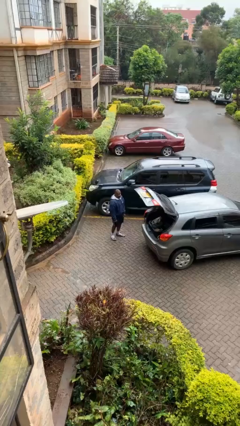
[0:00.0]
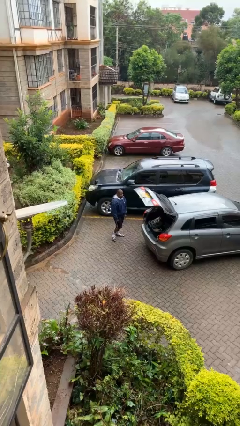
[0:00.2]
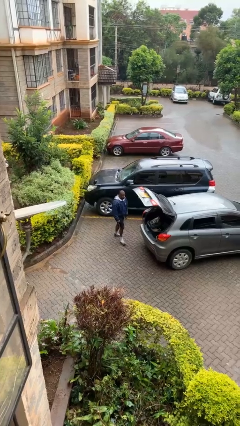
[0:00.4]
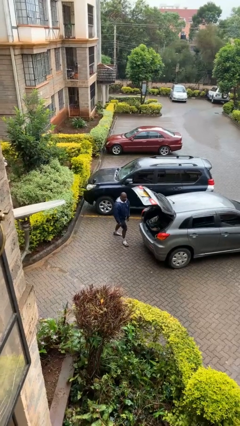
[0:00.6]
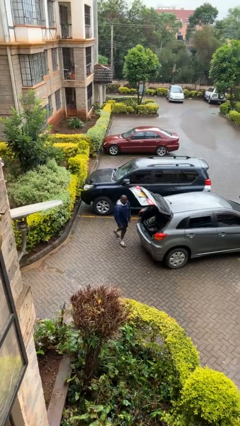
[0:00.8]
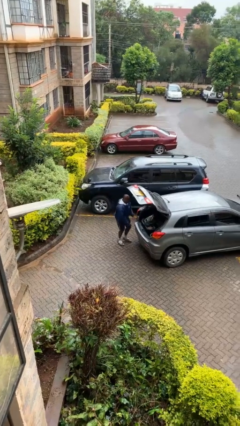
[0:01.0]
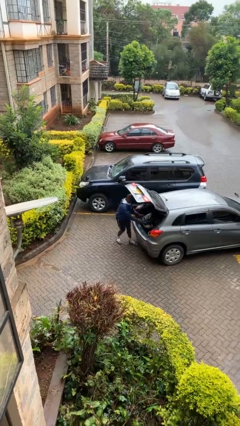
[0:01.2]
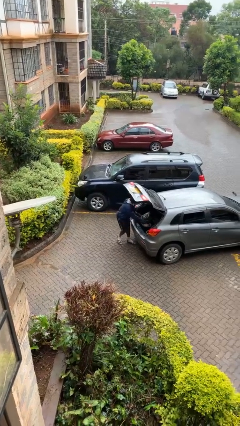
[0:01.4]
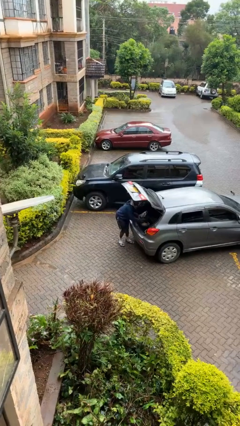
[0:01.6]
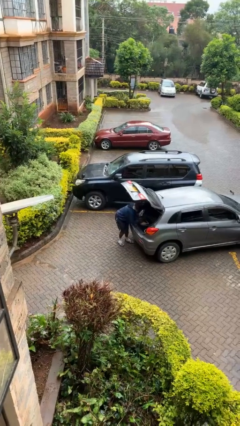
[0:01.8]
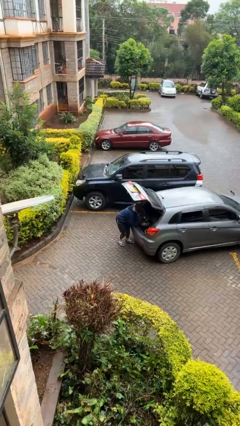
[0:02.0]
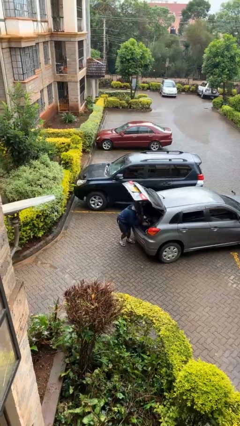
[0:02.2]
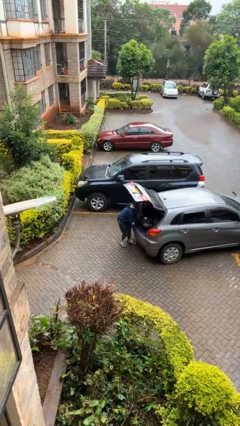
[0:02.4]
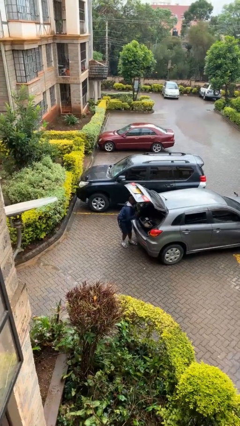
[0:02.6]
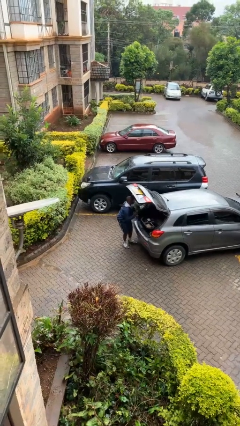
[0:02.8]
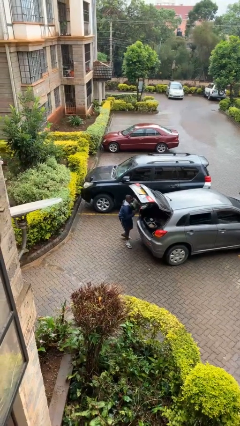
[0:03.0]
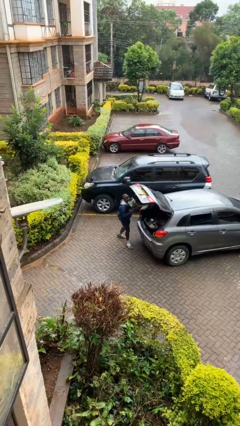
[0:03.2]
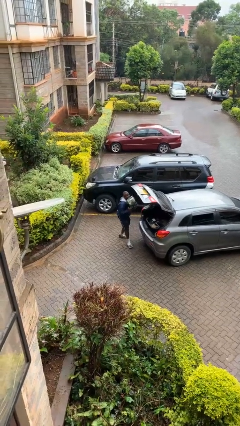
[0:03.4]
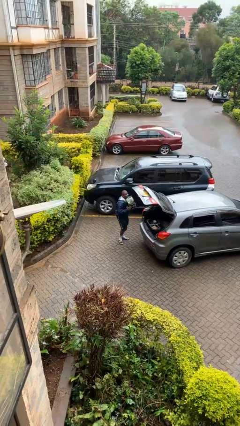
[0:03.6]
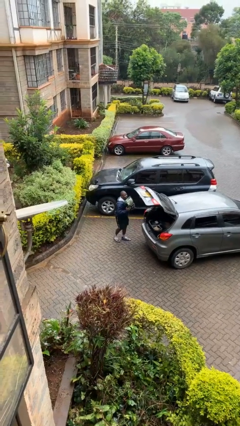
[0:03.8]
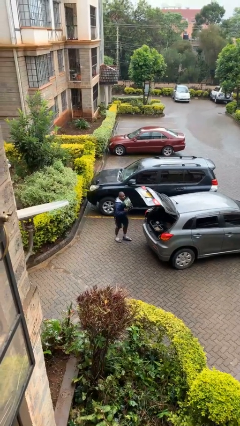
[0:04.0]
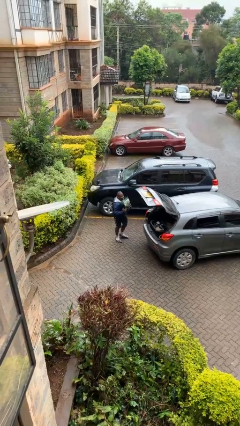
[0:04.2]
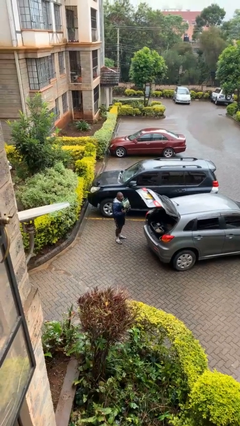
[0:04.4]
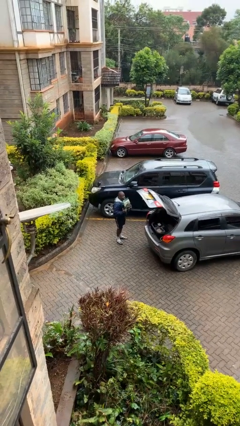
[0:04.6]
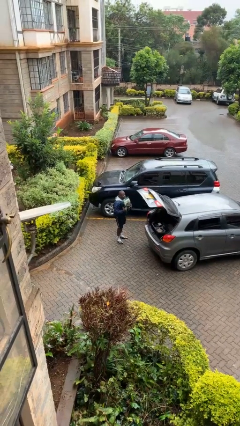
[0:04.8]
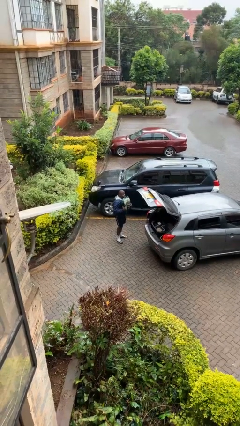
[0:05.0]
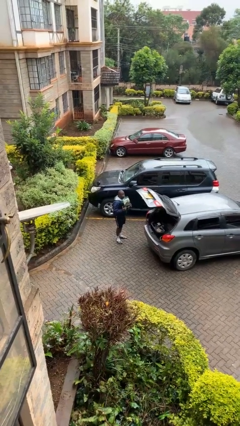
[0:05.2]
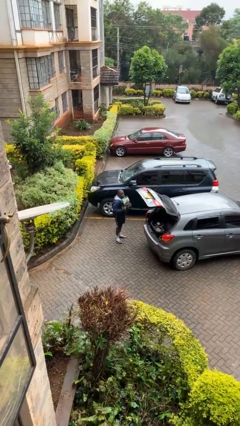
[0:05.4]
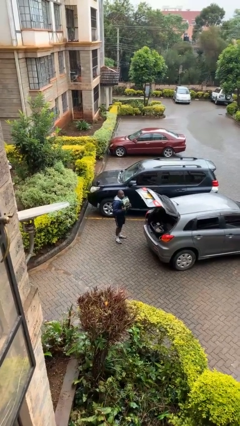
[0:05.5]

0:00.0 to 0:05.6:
person unloads car

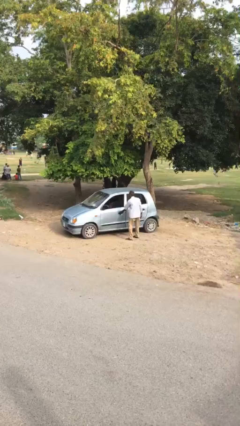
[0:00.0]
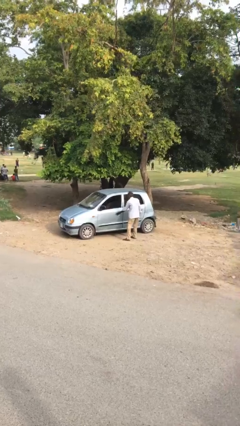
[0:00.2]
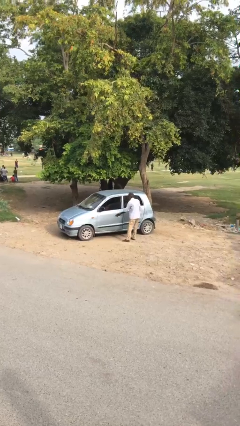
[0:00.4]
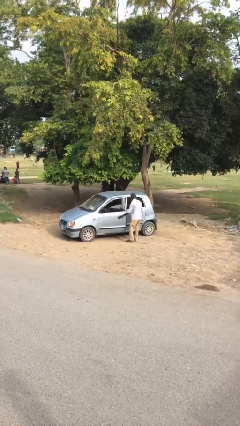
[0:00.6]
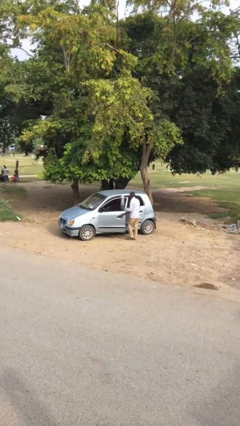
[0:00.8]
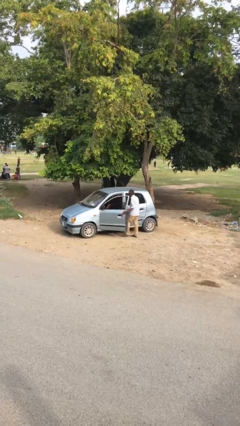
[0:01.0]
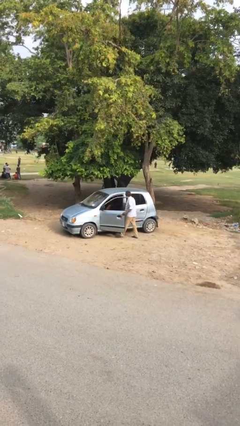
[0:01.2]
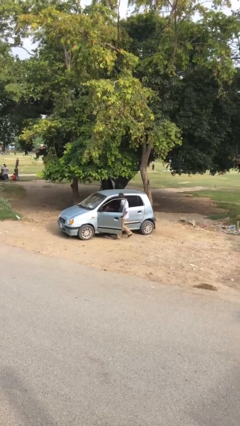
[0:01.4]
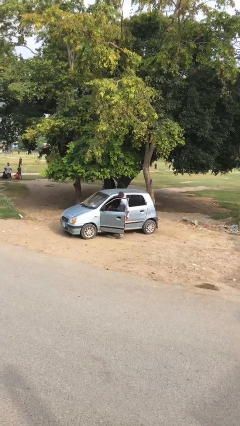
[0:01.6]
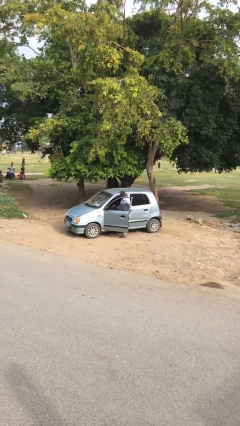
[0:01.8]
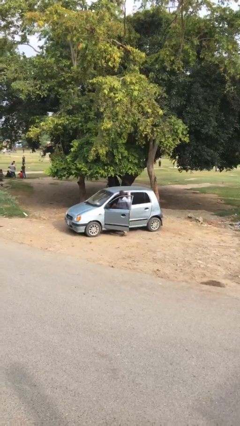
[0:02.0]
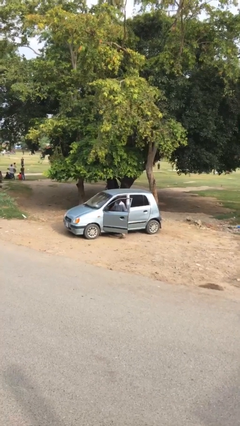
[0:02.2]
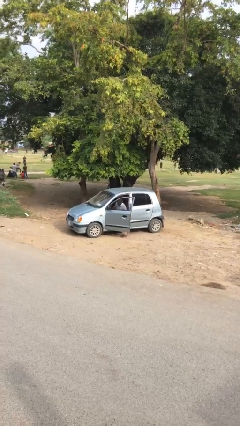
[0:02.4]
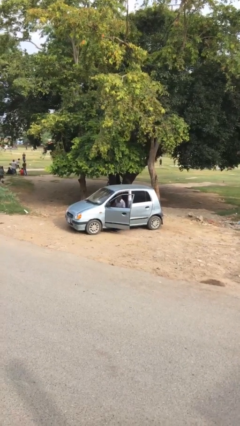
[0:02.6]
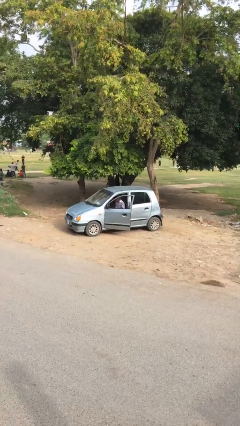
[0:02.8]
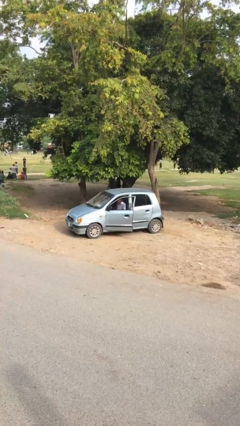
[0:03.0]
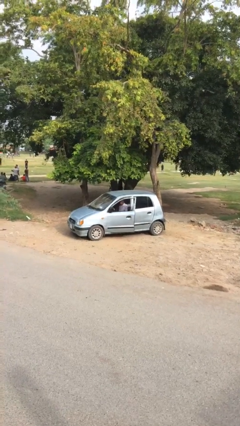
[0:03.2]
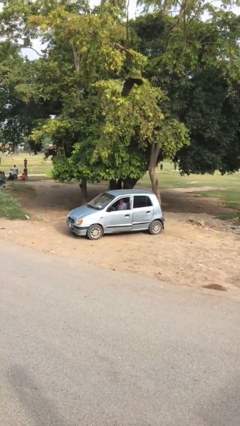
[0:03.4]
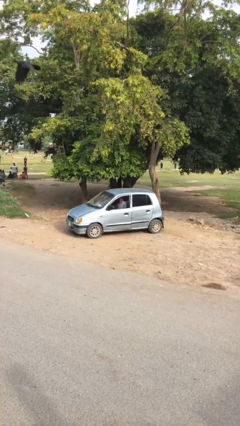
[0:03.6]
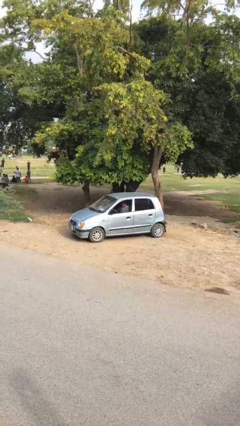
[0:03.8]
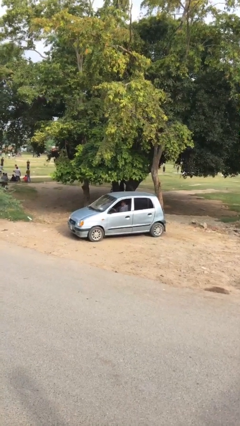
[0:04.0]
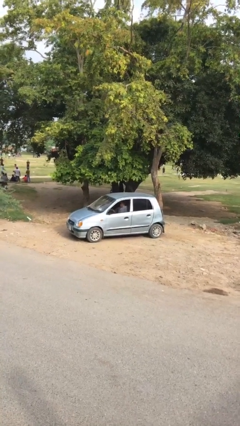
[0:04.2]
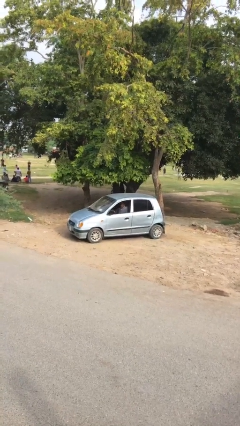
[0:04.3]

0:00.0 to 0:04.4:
car picks up person

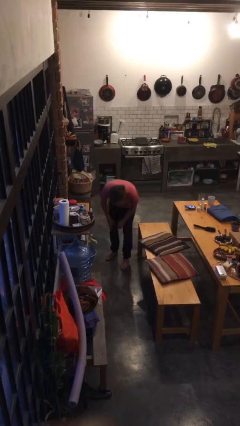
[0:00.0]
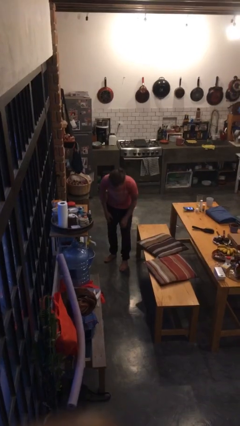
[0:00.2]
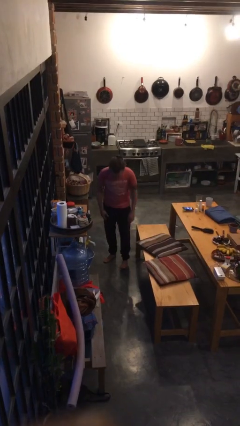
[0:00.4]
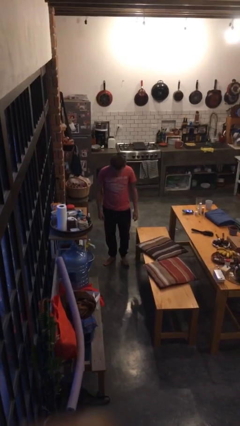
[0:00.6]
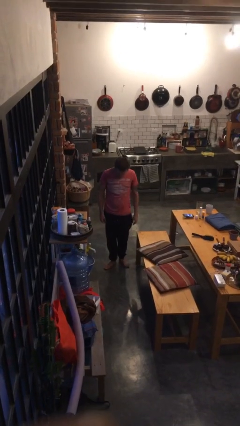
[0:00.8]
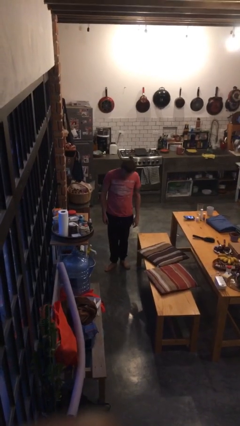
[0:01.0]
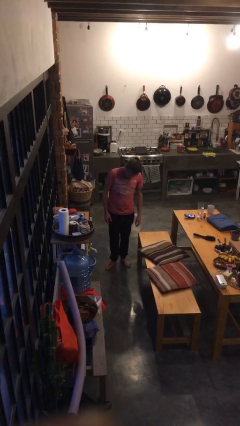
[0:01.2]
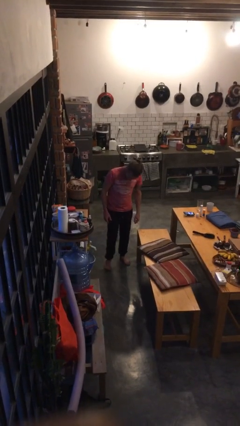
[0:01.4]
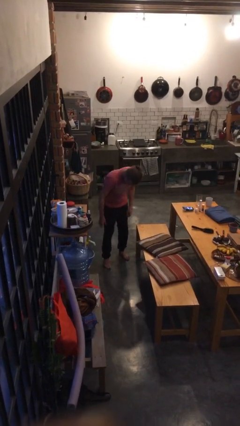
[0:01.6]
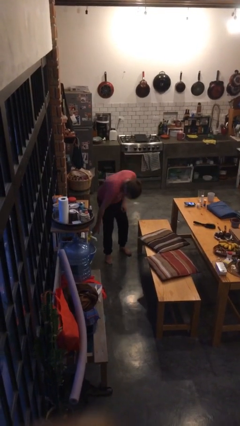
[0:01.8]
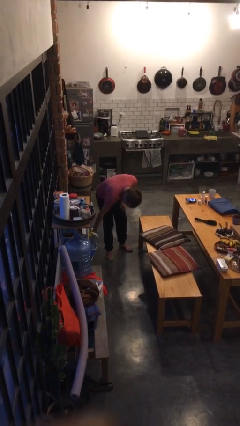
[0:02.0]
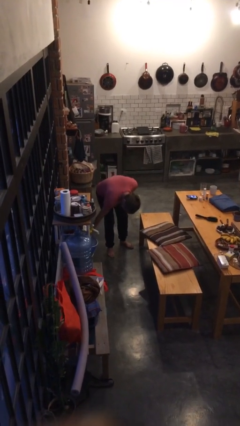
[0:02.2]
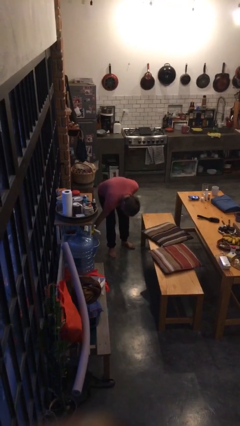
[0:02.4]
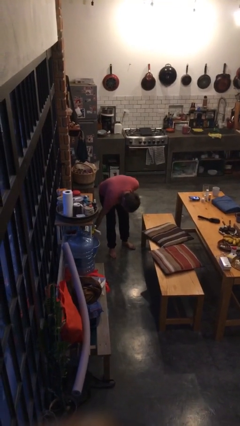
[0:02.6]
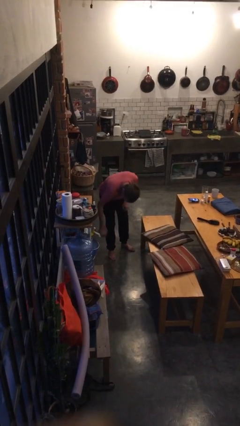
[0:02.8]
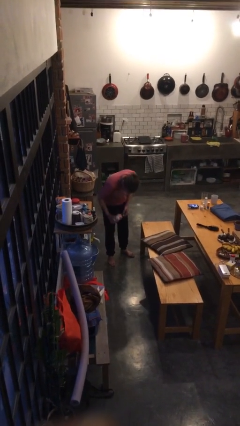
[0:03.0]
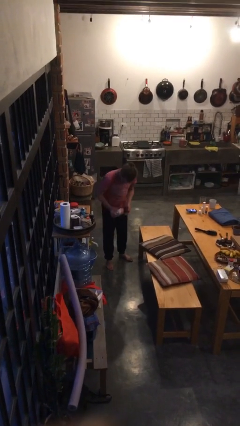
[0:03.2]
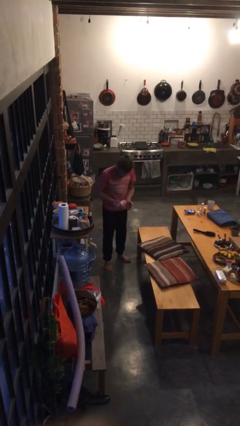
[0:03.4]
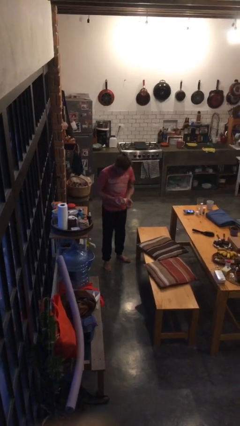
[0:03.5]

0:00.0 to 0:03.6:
person picks up object from cabinet

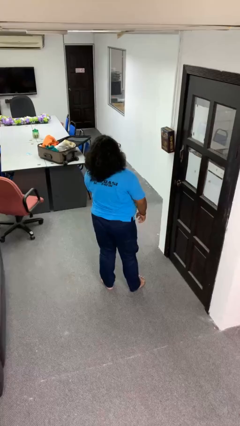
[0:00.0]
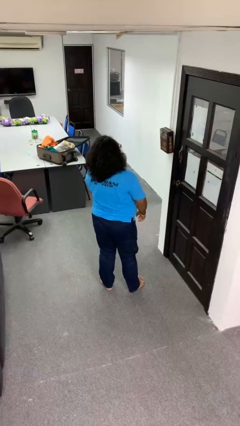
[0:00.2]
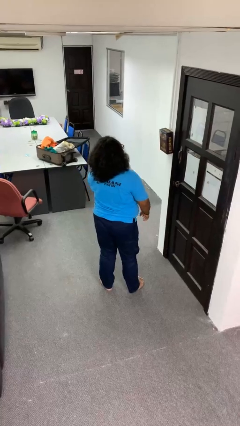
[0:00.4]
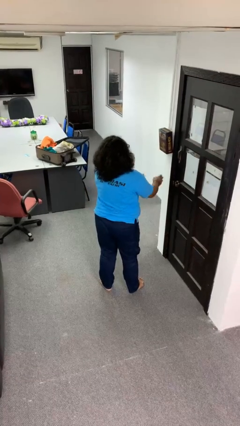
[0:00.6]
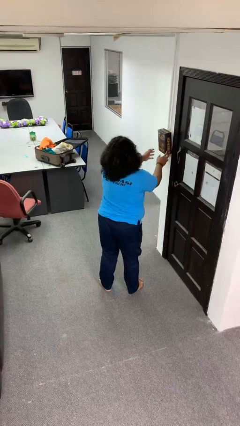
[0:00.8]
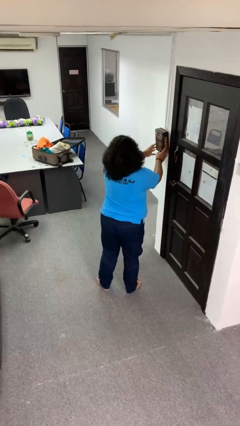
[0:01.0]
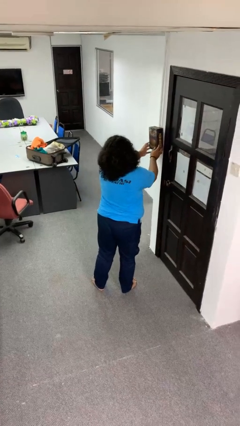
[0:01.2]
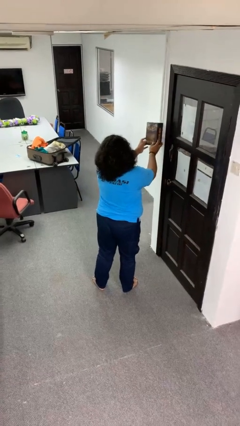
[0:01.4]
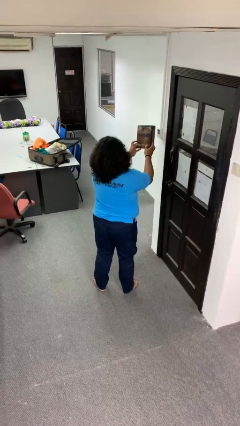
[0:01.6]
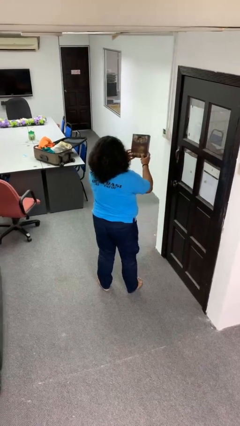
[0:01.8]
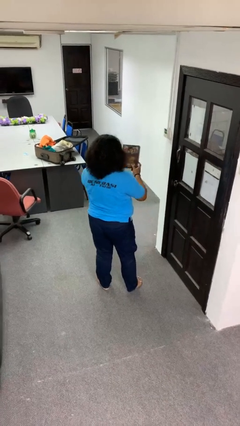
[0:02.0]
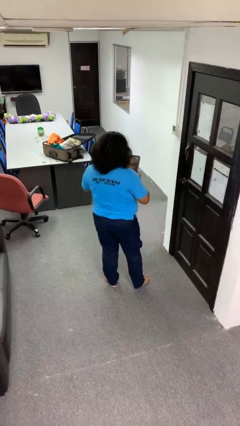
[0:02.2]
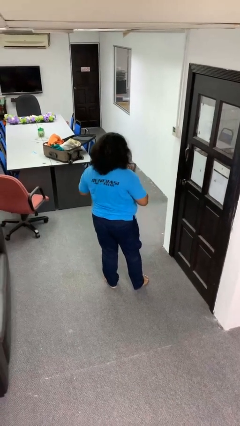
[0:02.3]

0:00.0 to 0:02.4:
person takes down picture frame

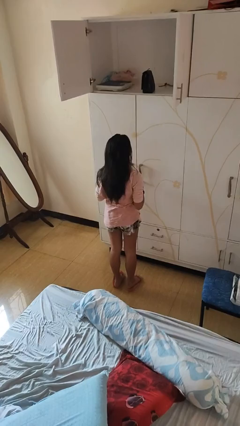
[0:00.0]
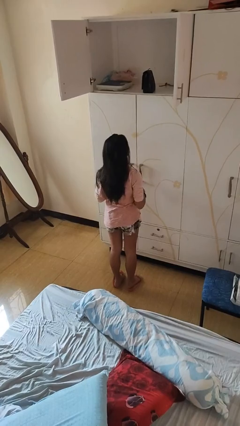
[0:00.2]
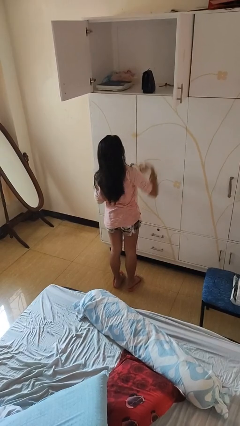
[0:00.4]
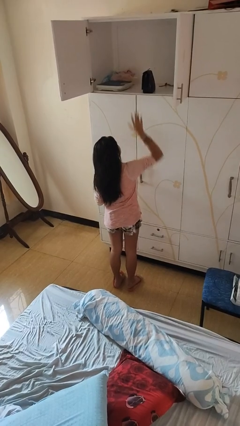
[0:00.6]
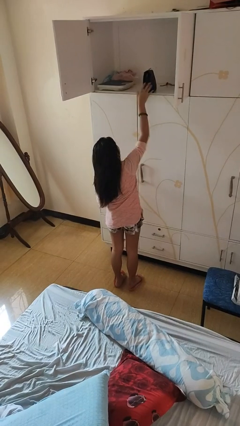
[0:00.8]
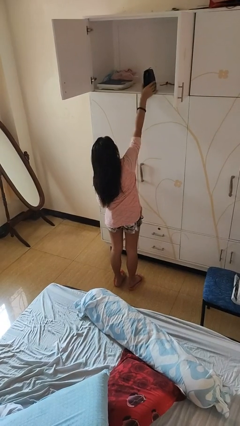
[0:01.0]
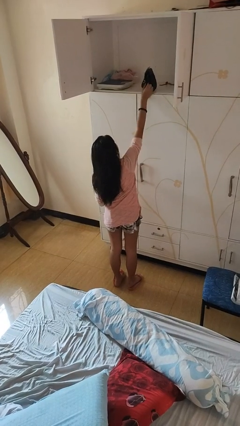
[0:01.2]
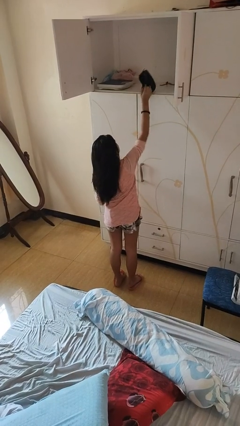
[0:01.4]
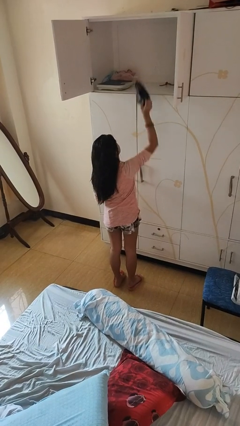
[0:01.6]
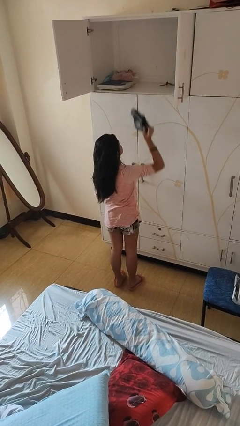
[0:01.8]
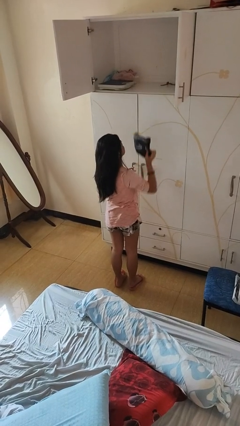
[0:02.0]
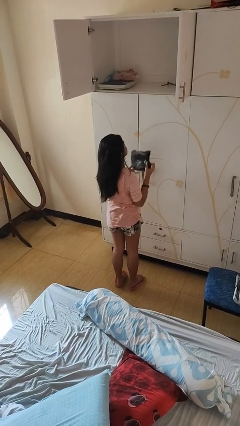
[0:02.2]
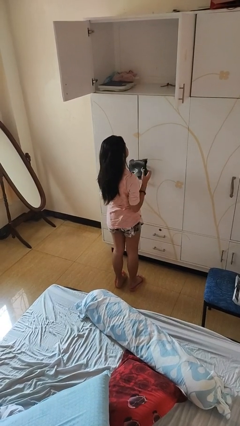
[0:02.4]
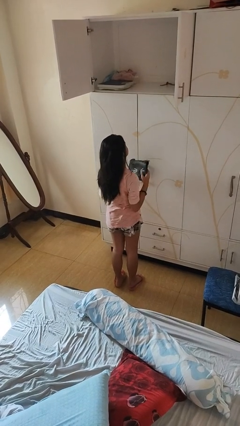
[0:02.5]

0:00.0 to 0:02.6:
person picks up object from shelf
